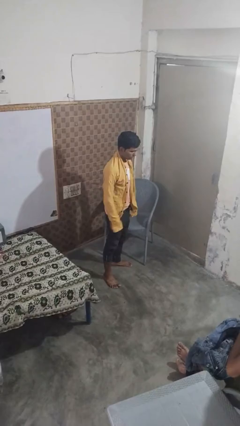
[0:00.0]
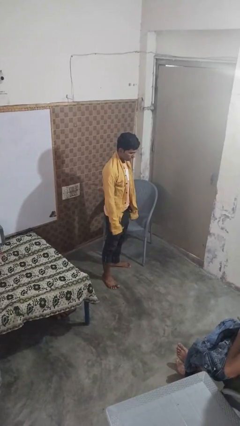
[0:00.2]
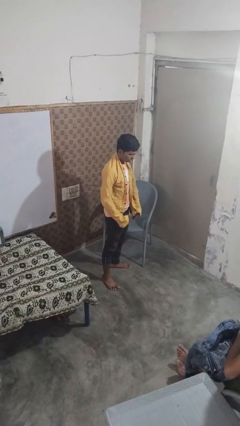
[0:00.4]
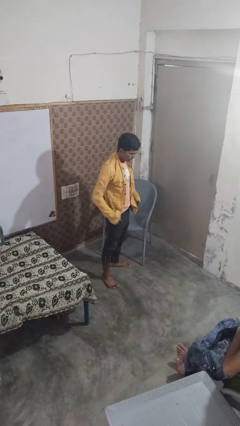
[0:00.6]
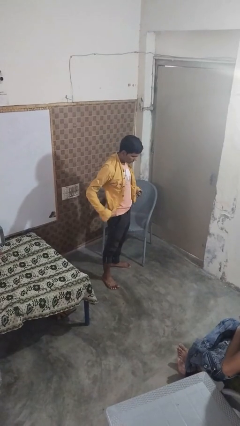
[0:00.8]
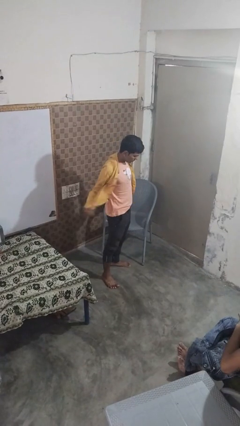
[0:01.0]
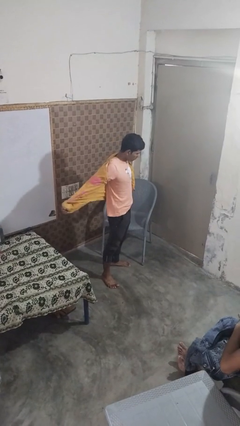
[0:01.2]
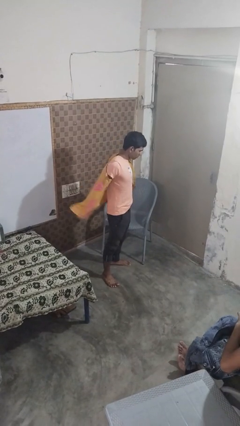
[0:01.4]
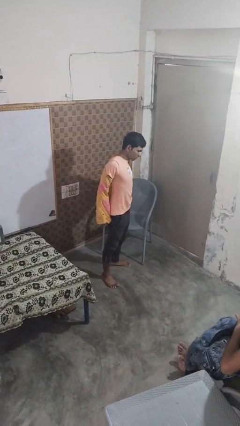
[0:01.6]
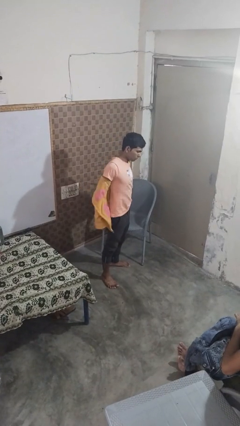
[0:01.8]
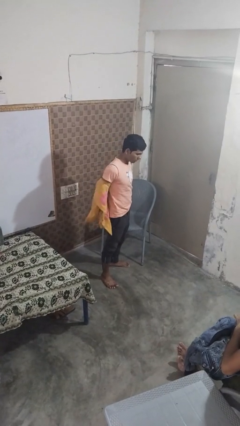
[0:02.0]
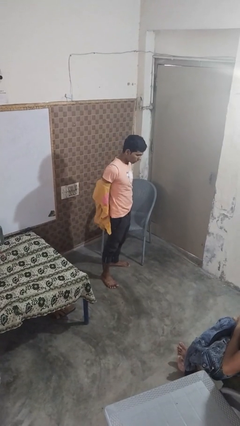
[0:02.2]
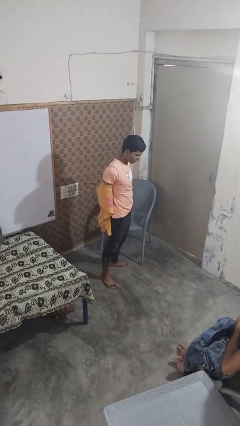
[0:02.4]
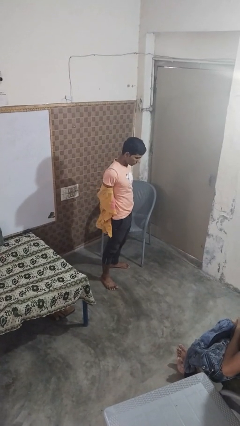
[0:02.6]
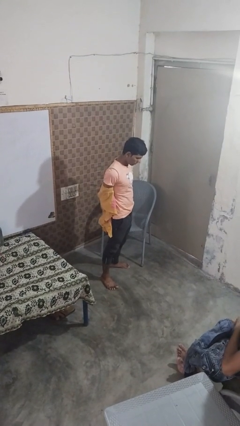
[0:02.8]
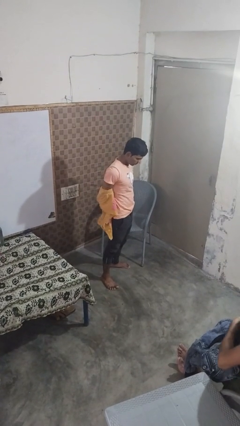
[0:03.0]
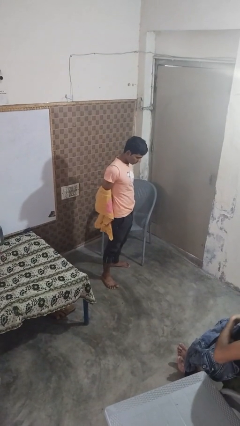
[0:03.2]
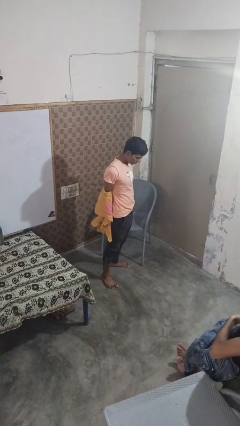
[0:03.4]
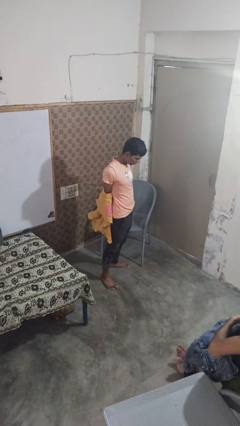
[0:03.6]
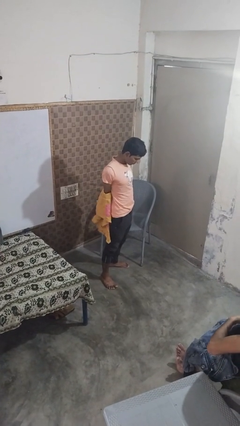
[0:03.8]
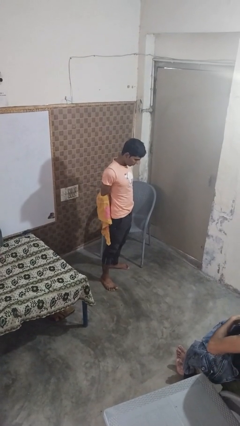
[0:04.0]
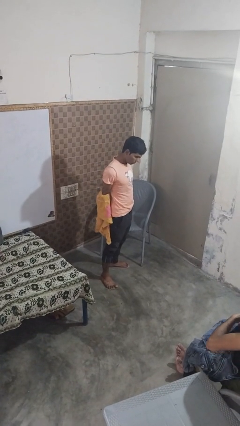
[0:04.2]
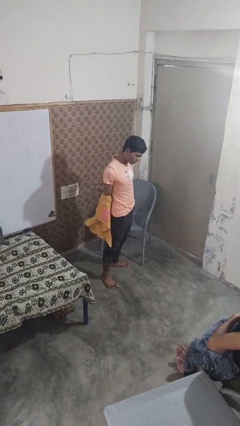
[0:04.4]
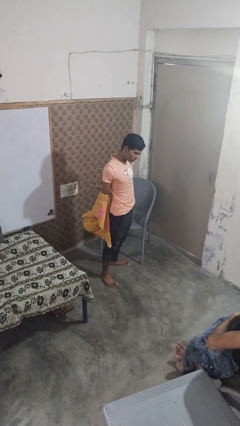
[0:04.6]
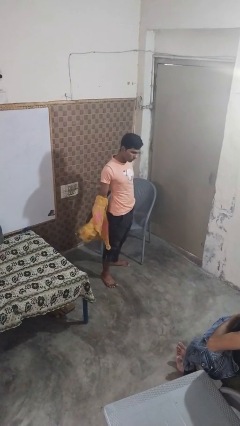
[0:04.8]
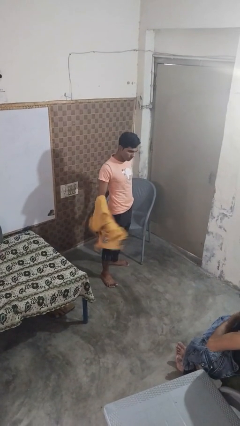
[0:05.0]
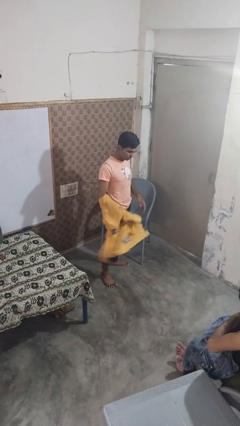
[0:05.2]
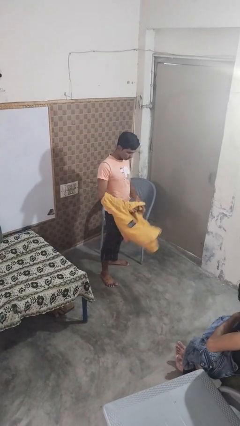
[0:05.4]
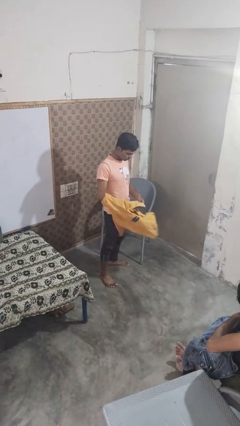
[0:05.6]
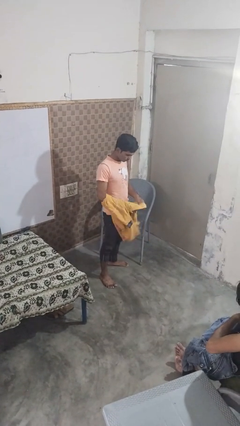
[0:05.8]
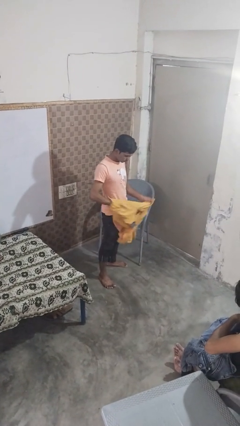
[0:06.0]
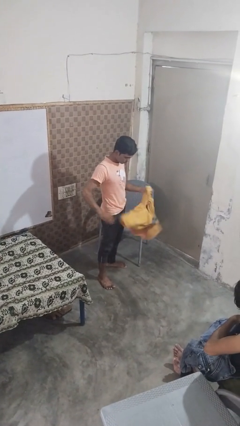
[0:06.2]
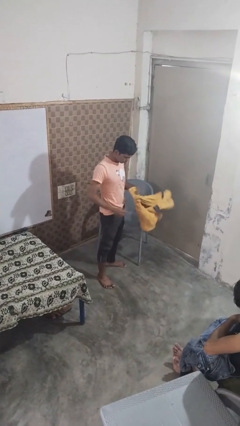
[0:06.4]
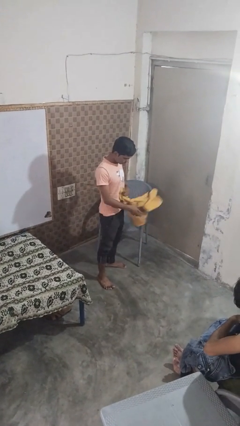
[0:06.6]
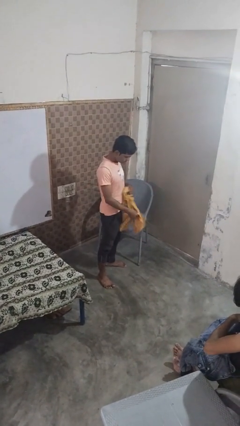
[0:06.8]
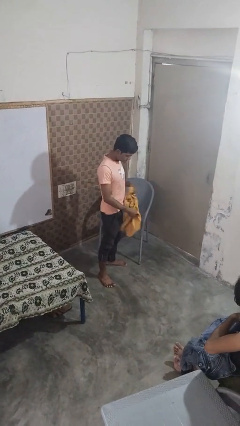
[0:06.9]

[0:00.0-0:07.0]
person takes off shirt

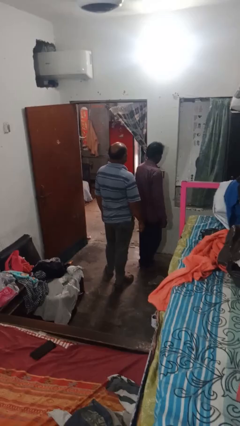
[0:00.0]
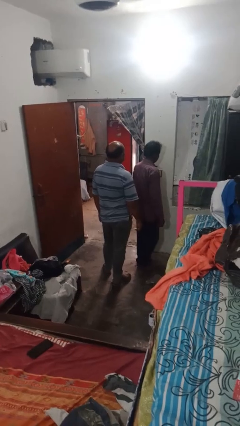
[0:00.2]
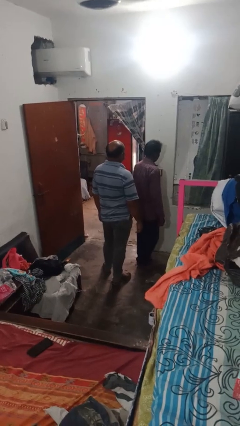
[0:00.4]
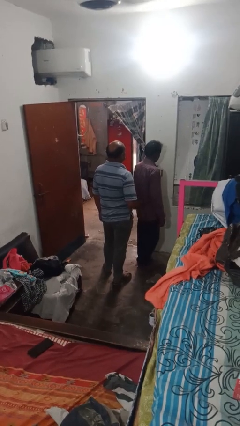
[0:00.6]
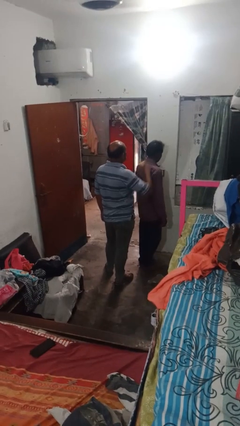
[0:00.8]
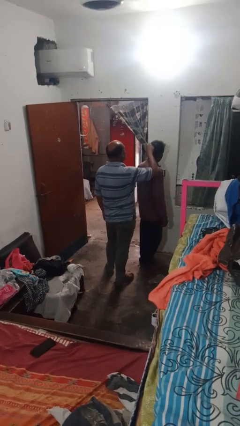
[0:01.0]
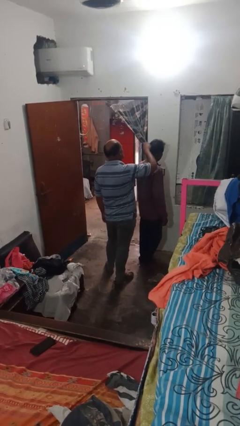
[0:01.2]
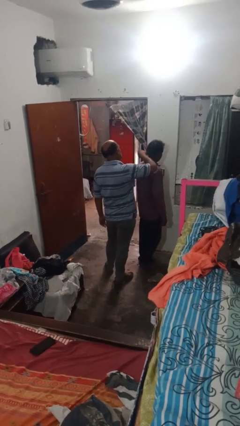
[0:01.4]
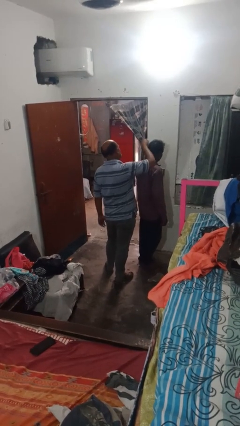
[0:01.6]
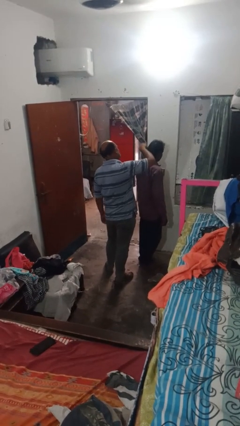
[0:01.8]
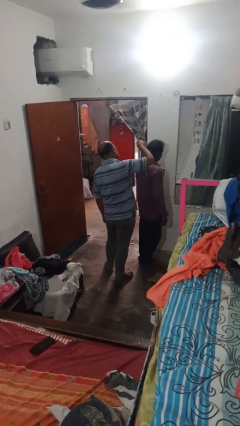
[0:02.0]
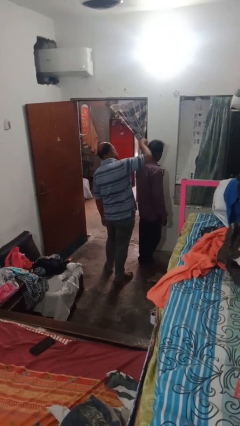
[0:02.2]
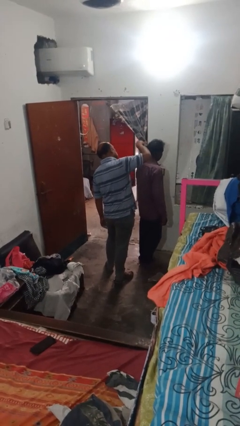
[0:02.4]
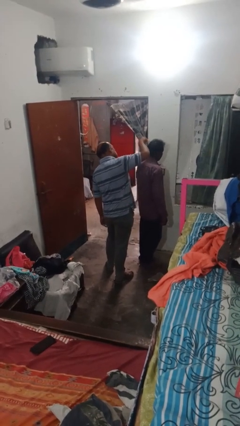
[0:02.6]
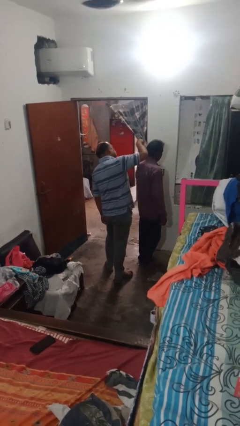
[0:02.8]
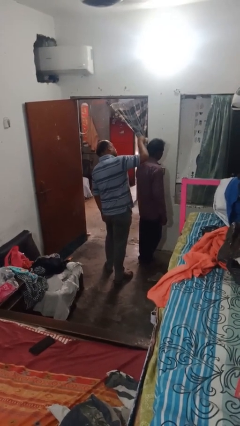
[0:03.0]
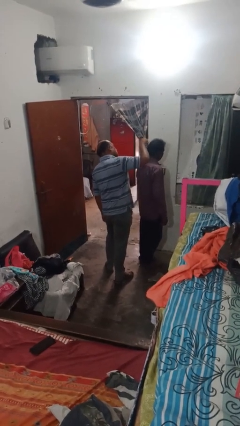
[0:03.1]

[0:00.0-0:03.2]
person brushes hair of person

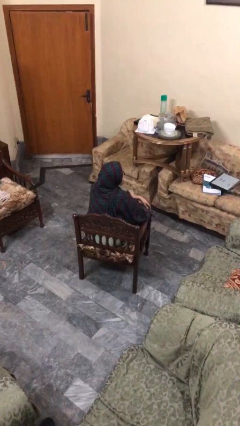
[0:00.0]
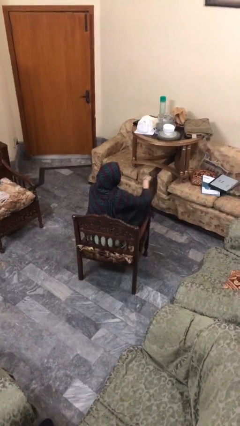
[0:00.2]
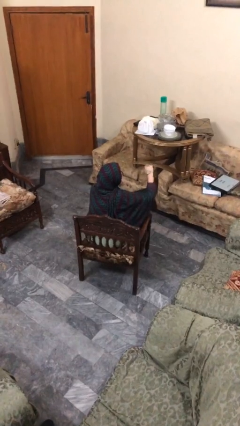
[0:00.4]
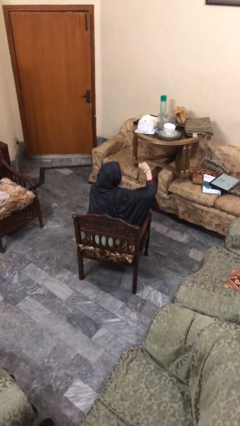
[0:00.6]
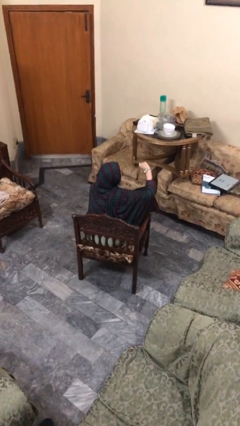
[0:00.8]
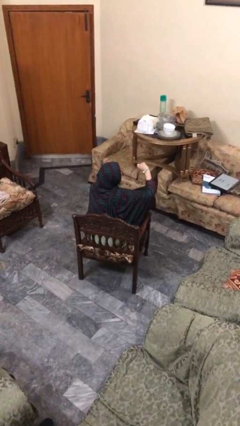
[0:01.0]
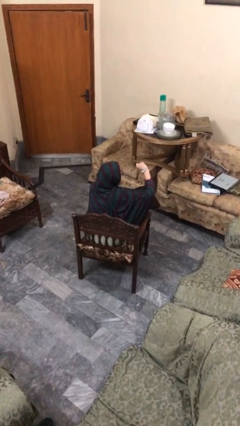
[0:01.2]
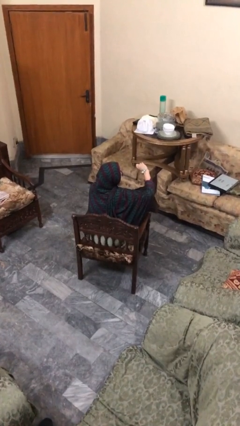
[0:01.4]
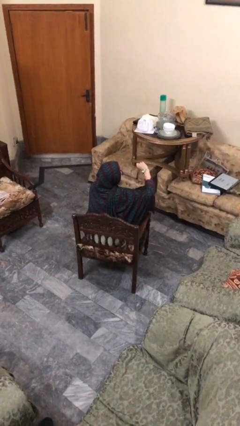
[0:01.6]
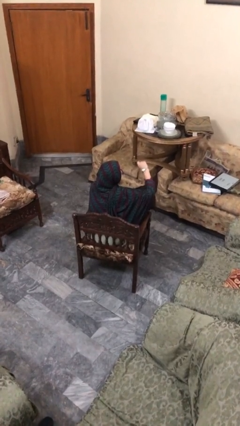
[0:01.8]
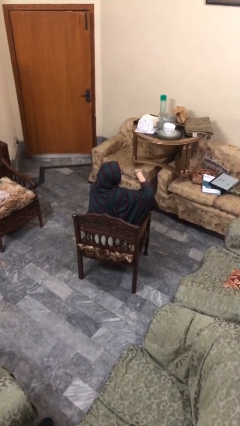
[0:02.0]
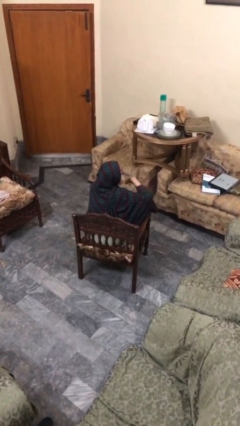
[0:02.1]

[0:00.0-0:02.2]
person looks at wristwatch

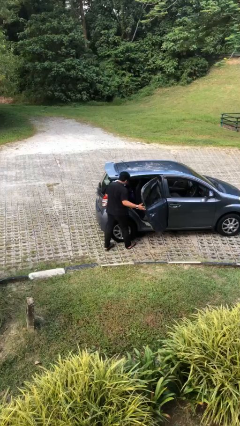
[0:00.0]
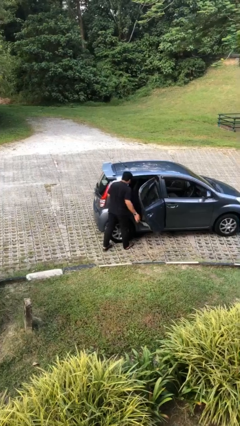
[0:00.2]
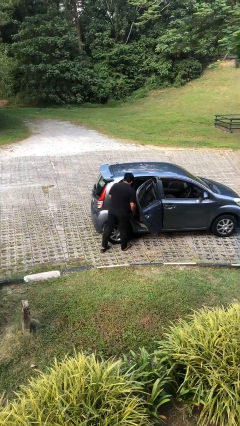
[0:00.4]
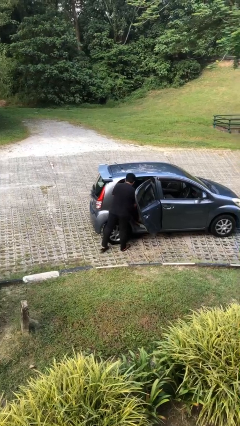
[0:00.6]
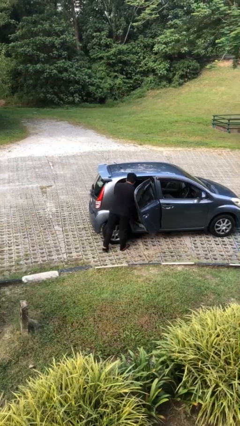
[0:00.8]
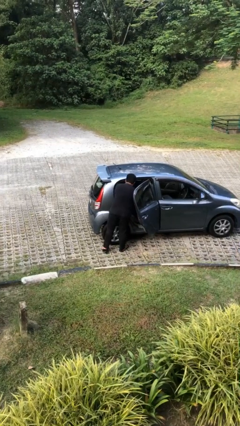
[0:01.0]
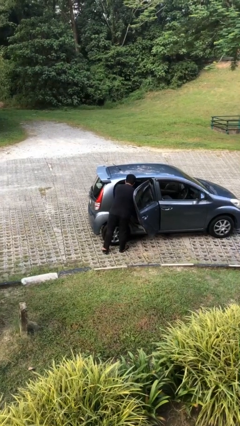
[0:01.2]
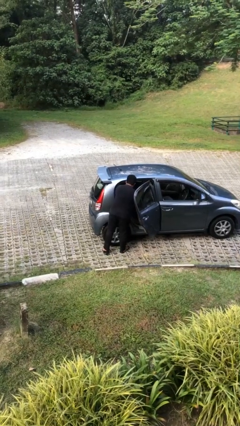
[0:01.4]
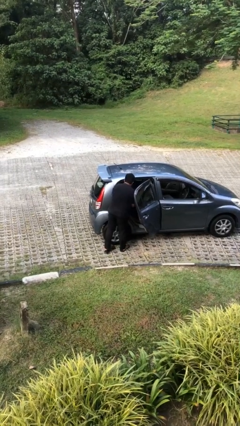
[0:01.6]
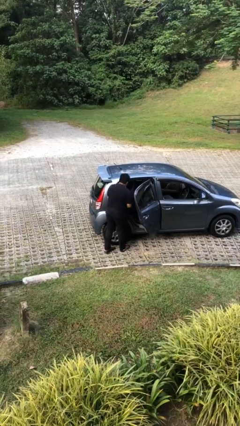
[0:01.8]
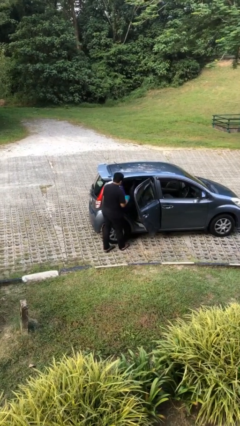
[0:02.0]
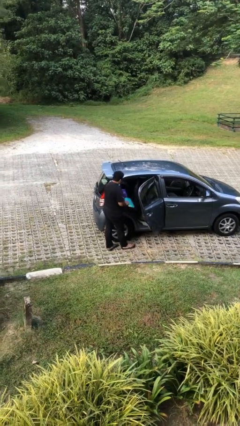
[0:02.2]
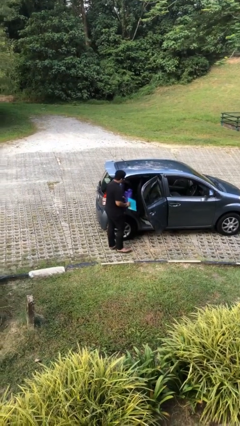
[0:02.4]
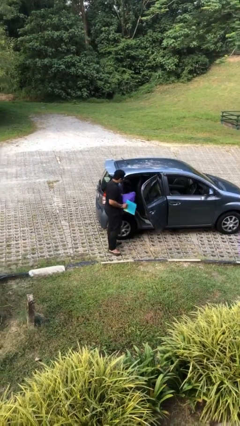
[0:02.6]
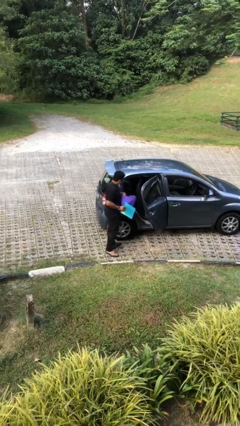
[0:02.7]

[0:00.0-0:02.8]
person unloads car

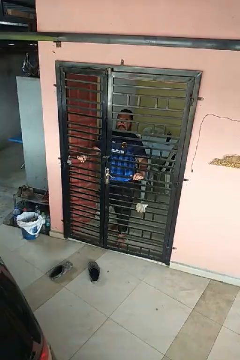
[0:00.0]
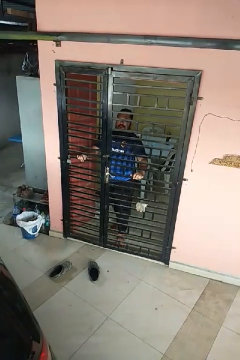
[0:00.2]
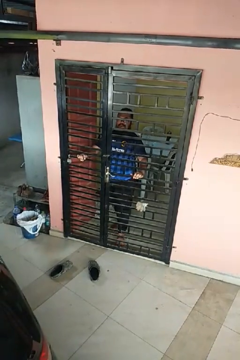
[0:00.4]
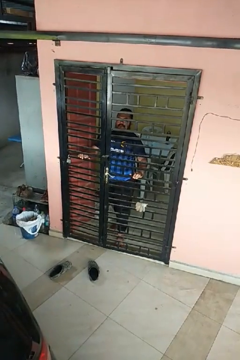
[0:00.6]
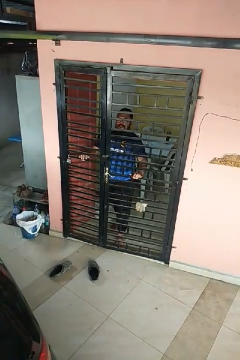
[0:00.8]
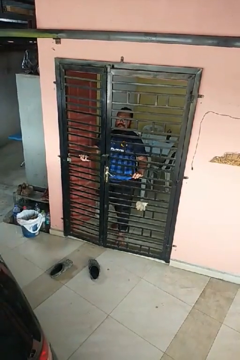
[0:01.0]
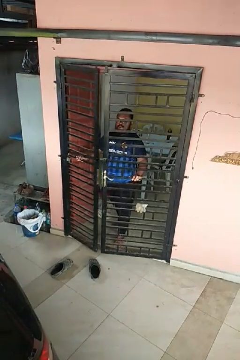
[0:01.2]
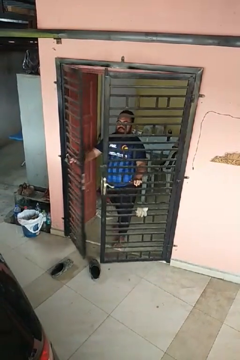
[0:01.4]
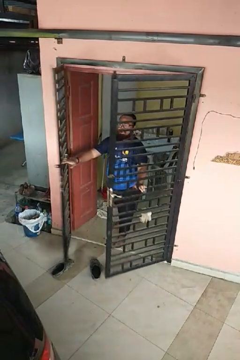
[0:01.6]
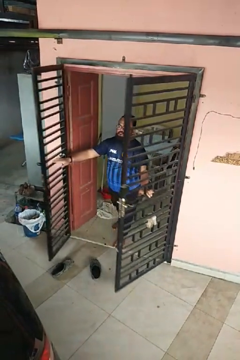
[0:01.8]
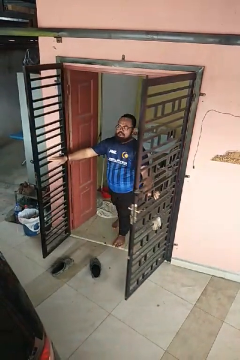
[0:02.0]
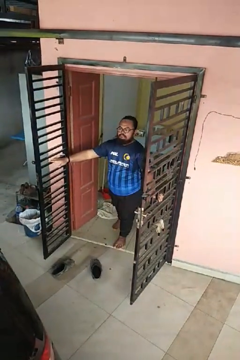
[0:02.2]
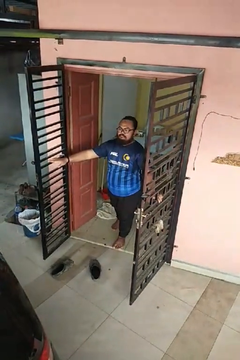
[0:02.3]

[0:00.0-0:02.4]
person opens gate
